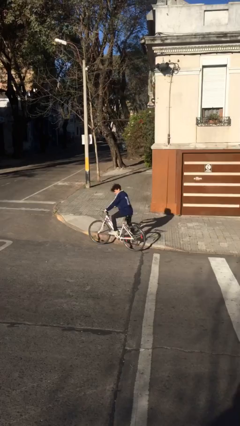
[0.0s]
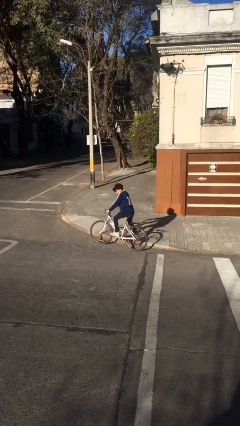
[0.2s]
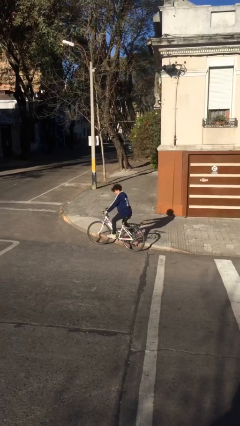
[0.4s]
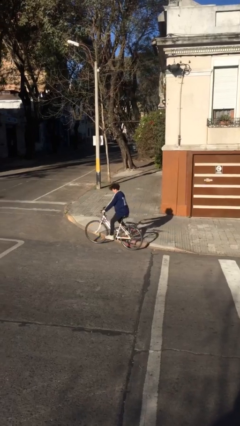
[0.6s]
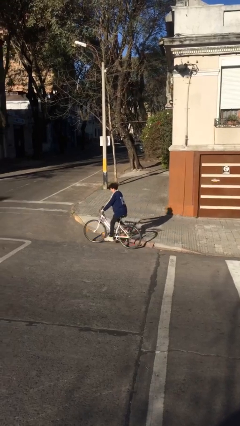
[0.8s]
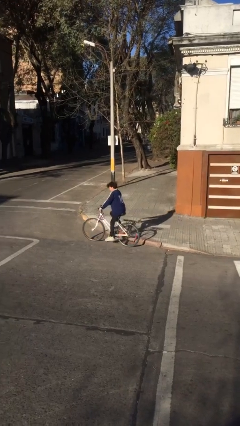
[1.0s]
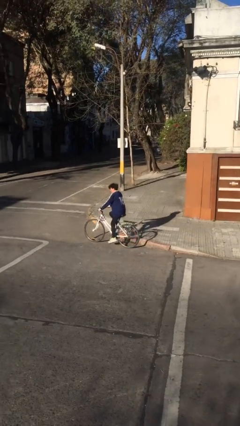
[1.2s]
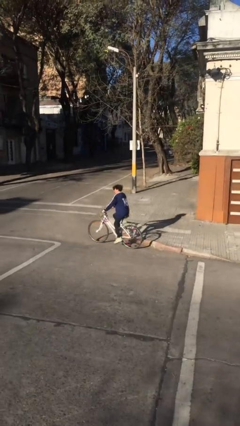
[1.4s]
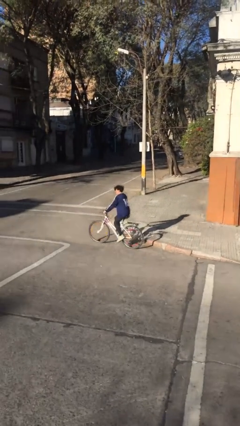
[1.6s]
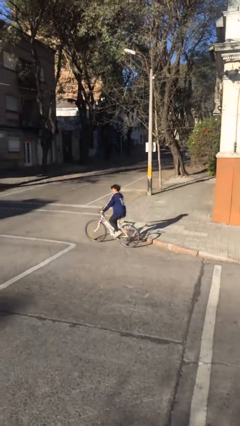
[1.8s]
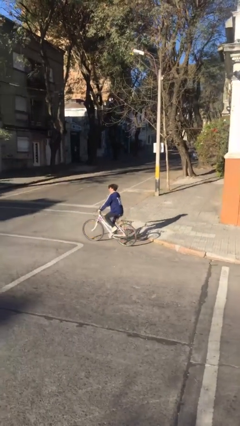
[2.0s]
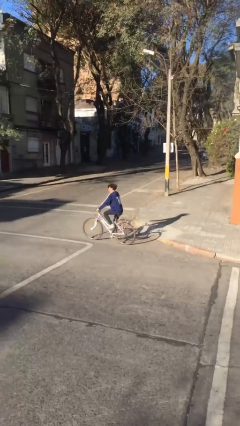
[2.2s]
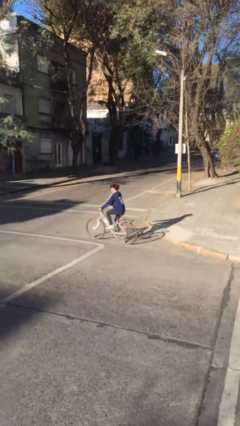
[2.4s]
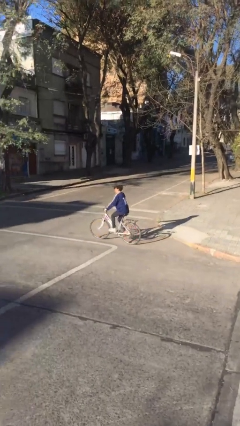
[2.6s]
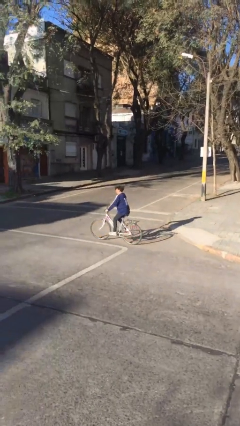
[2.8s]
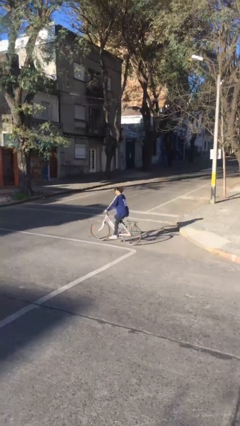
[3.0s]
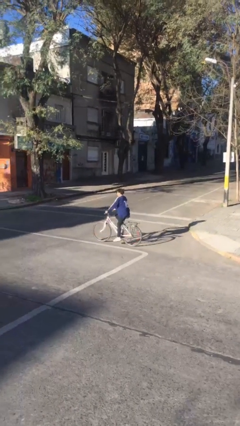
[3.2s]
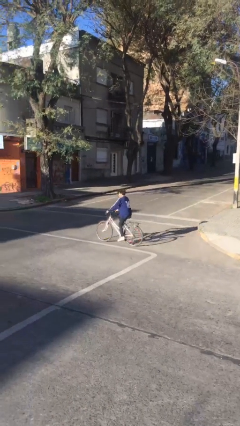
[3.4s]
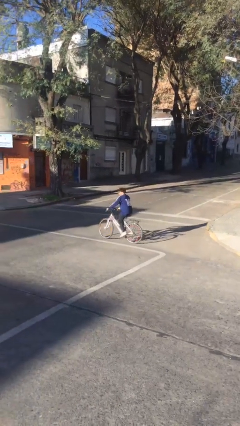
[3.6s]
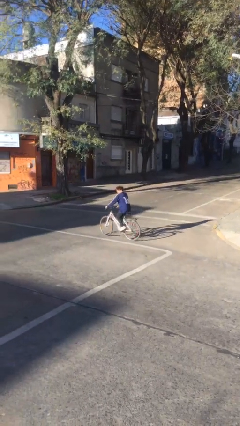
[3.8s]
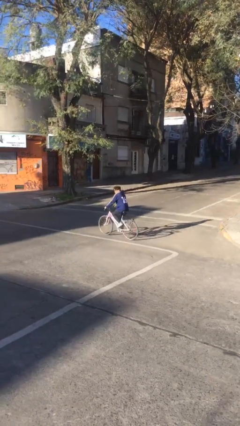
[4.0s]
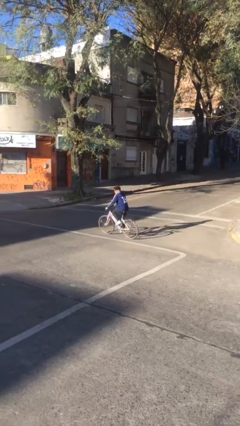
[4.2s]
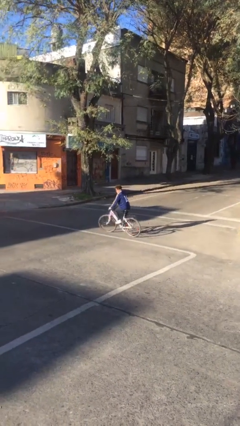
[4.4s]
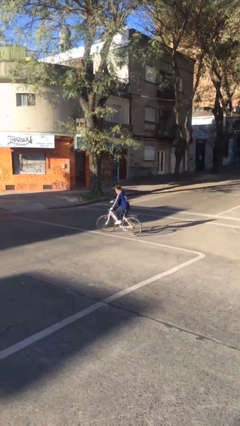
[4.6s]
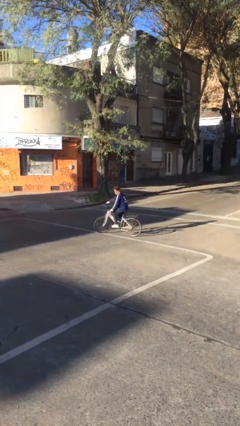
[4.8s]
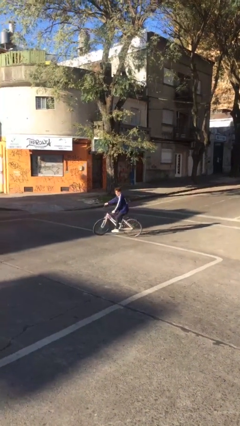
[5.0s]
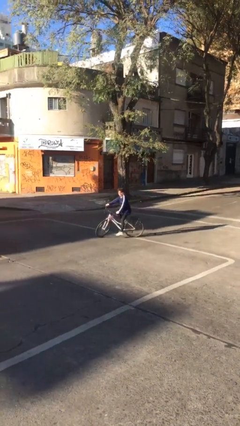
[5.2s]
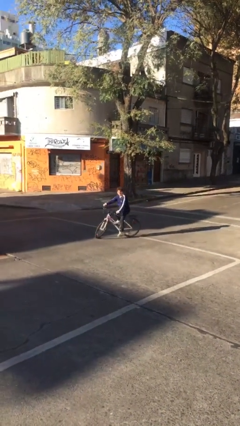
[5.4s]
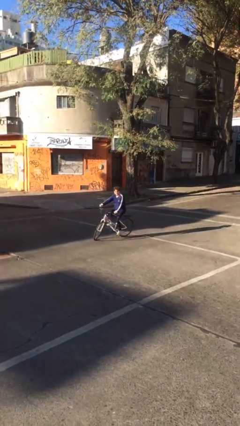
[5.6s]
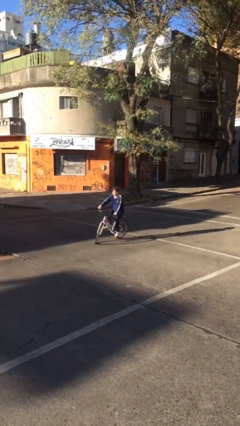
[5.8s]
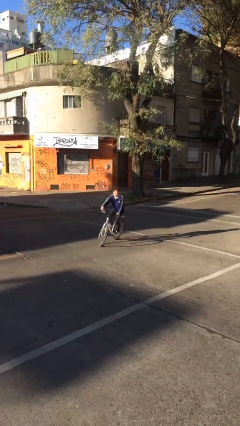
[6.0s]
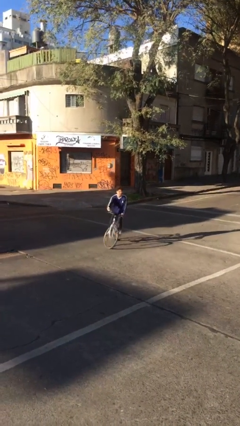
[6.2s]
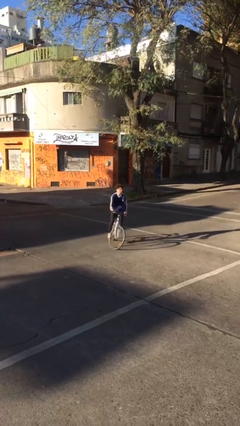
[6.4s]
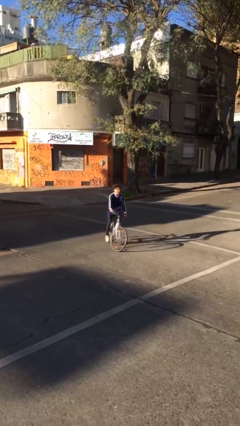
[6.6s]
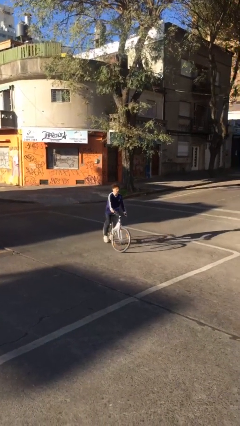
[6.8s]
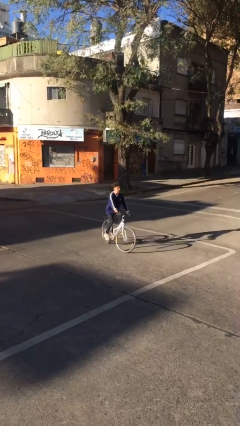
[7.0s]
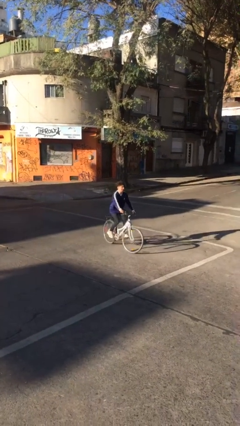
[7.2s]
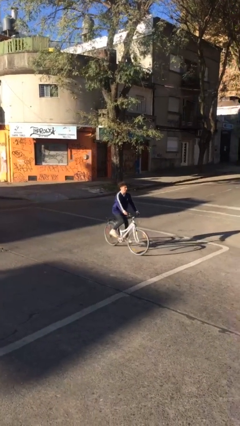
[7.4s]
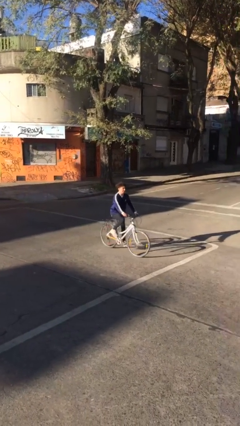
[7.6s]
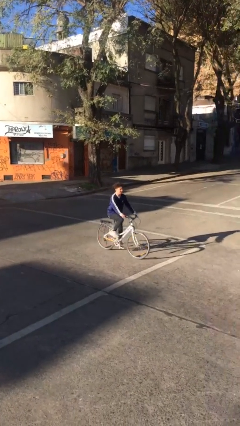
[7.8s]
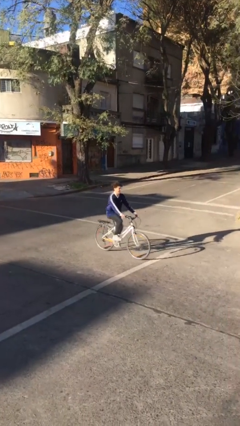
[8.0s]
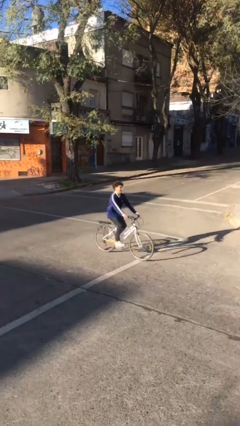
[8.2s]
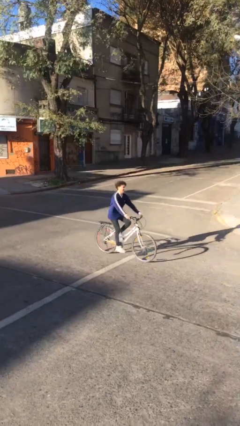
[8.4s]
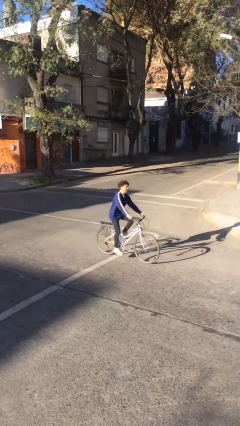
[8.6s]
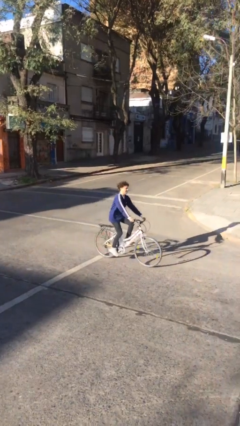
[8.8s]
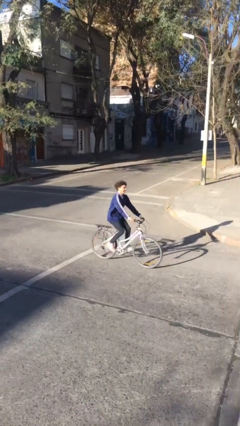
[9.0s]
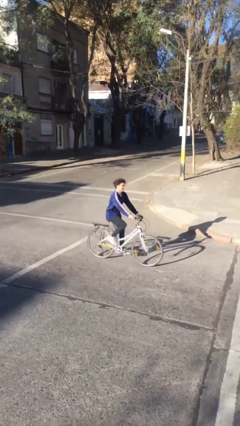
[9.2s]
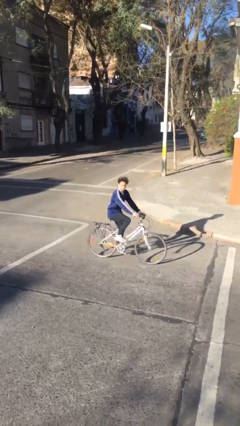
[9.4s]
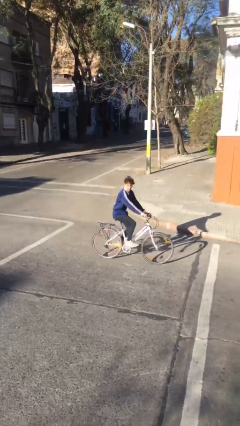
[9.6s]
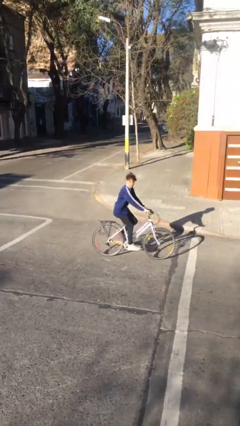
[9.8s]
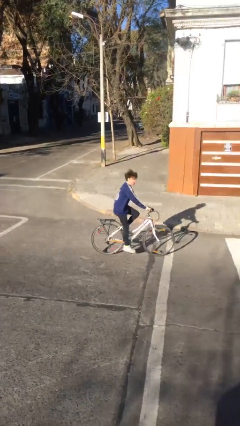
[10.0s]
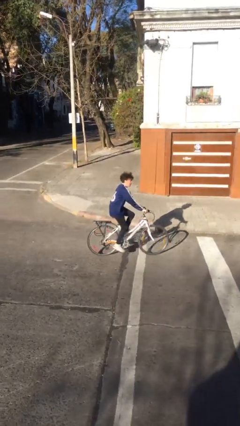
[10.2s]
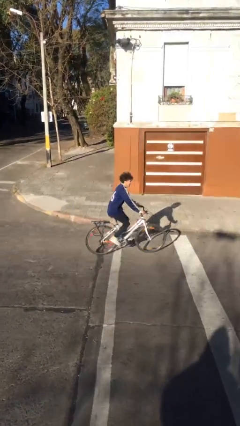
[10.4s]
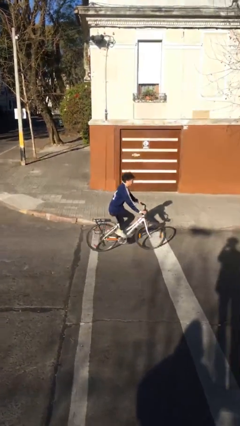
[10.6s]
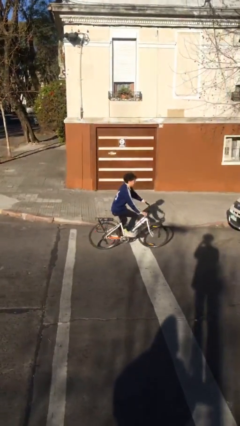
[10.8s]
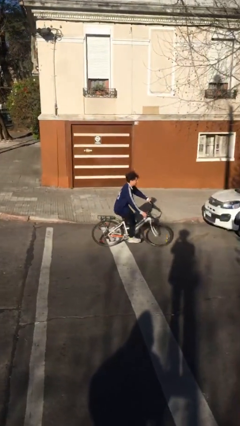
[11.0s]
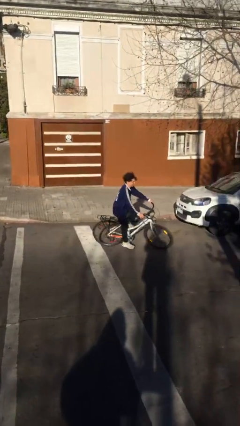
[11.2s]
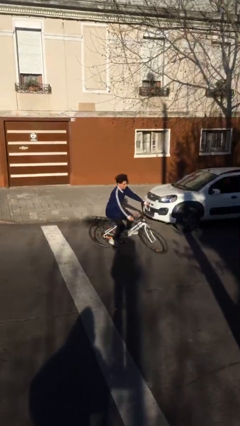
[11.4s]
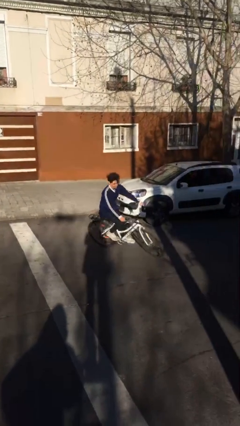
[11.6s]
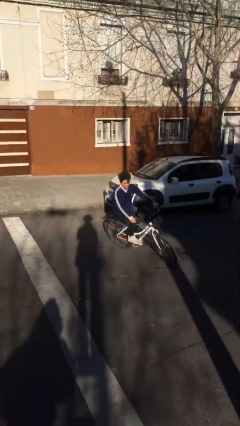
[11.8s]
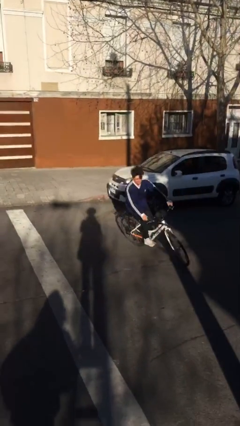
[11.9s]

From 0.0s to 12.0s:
person rides bicycle

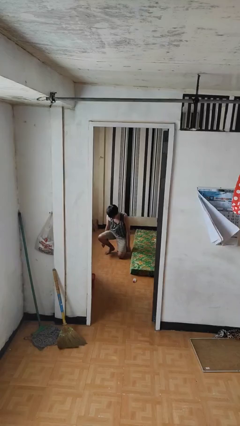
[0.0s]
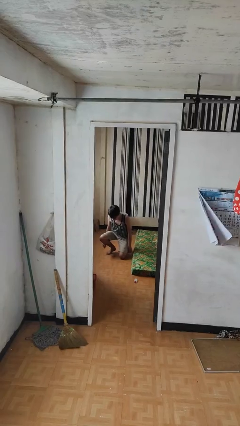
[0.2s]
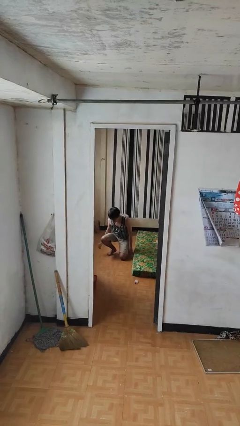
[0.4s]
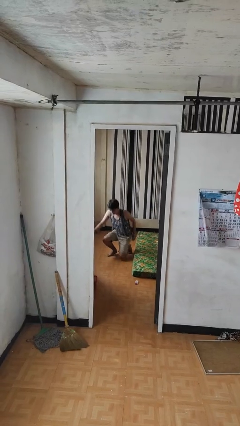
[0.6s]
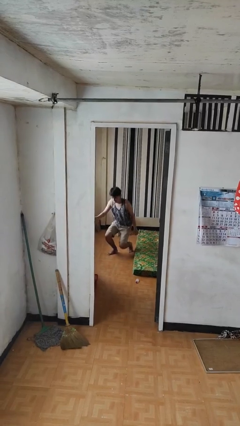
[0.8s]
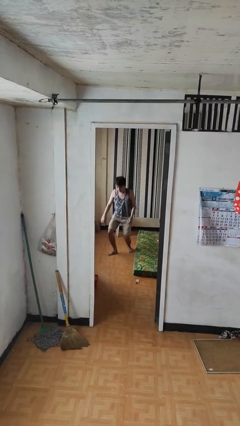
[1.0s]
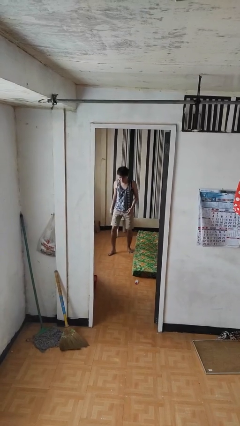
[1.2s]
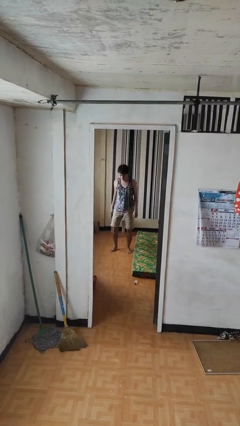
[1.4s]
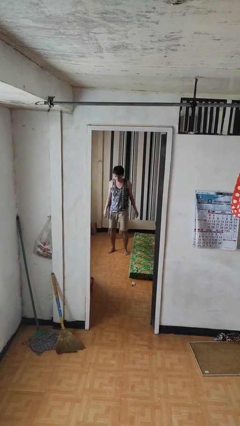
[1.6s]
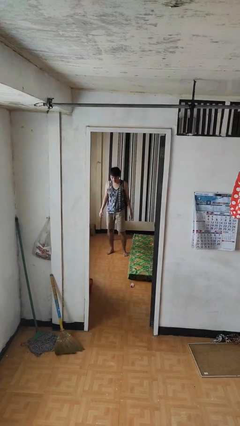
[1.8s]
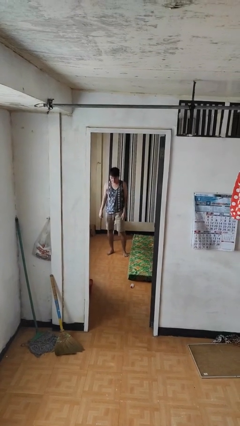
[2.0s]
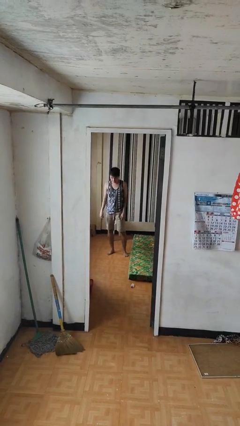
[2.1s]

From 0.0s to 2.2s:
person stands up from floor

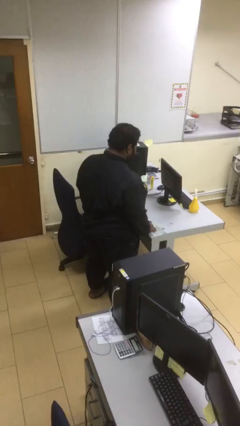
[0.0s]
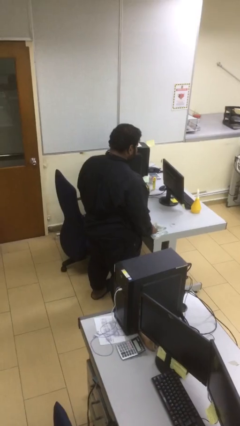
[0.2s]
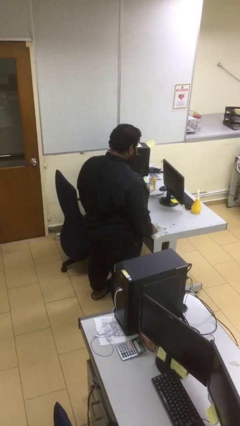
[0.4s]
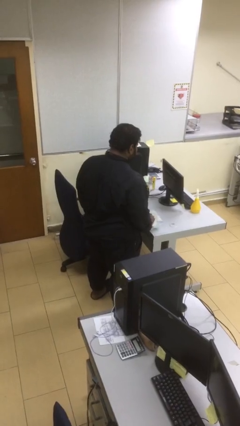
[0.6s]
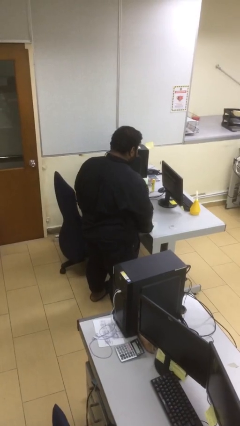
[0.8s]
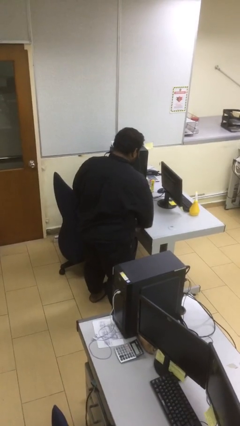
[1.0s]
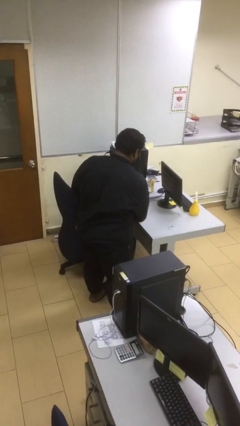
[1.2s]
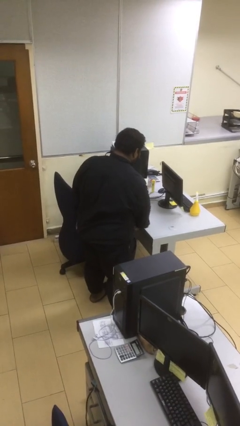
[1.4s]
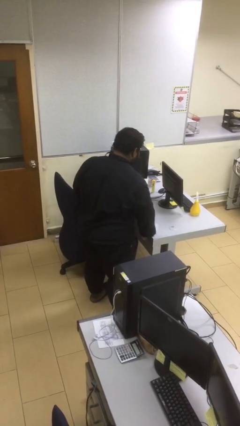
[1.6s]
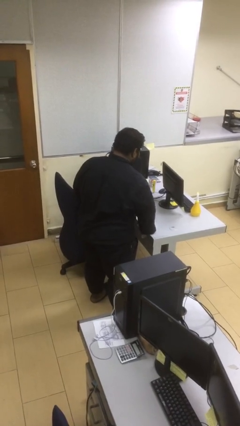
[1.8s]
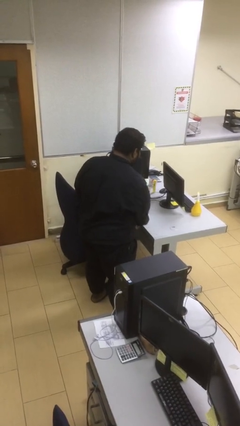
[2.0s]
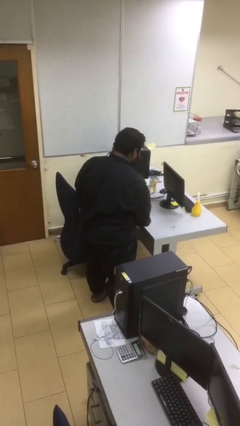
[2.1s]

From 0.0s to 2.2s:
person cleans table with rag

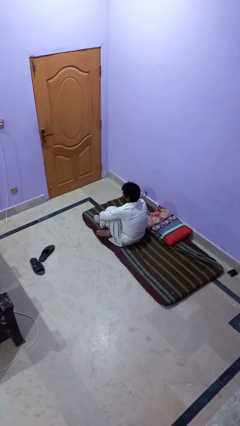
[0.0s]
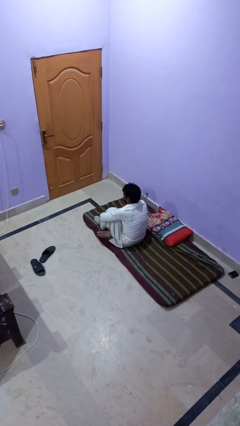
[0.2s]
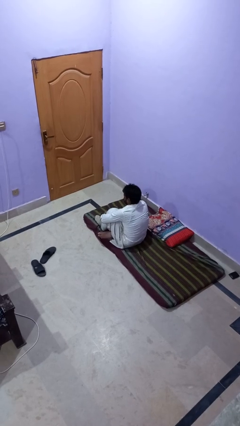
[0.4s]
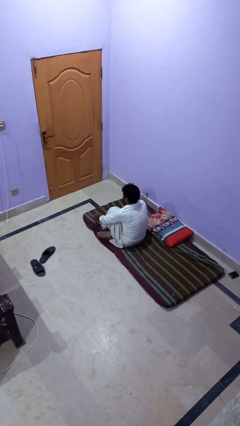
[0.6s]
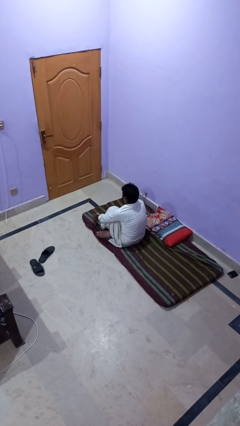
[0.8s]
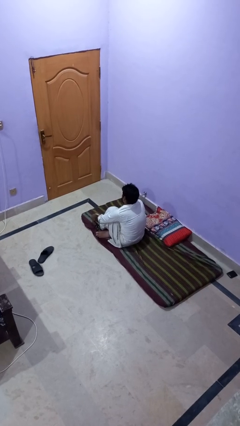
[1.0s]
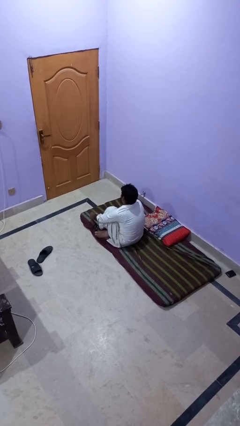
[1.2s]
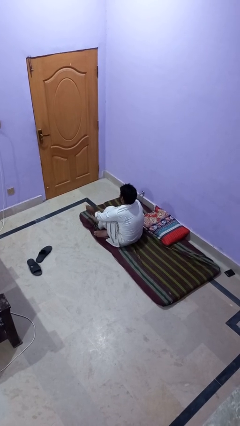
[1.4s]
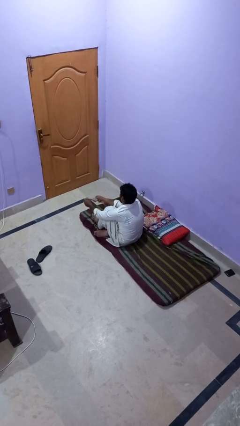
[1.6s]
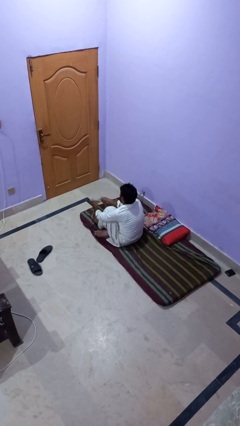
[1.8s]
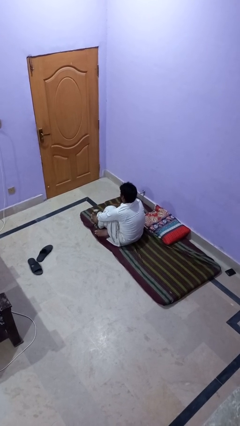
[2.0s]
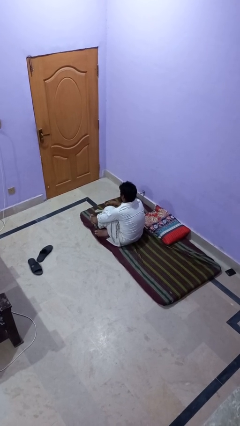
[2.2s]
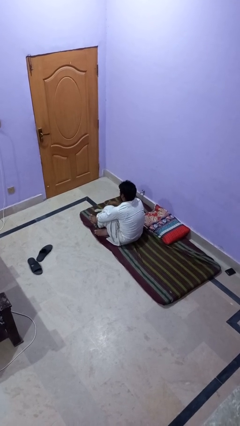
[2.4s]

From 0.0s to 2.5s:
person takes off socks
